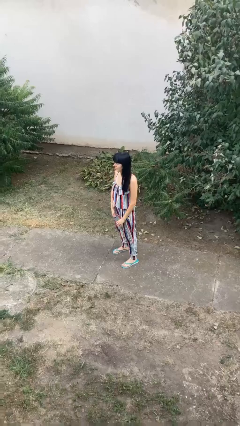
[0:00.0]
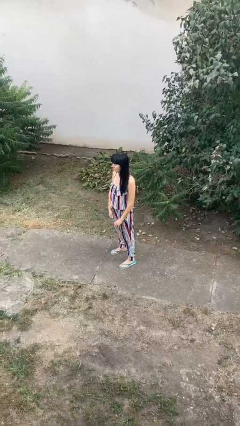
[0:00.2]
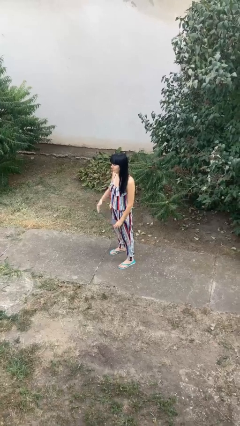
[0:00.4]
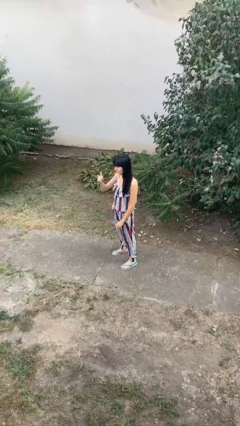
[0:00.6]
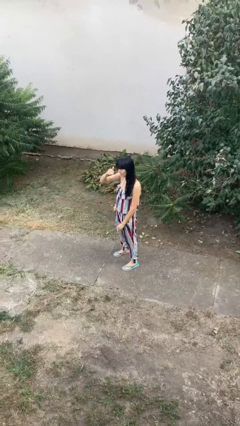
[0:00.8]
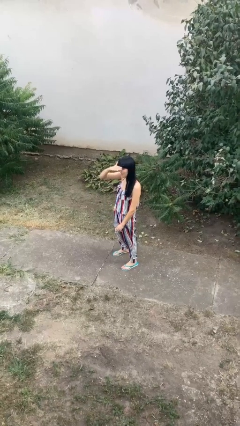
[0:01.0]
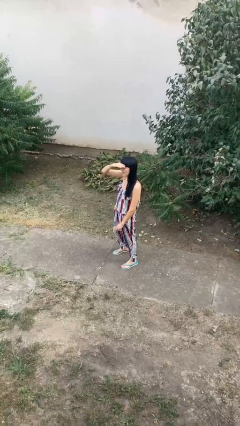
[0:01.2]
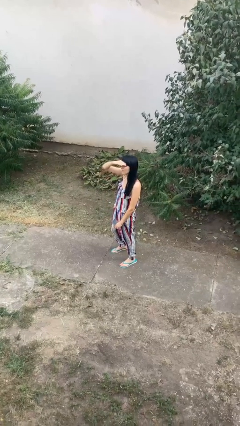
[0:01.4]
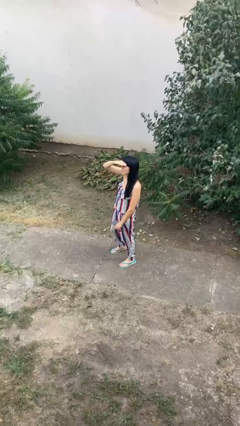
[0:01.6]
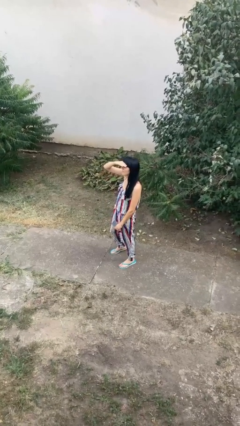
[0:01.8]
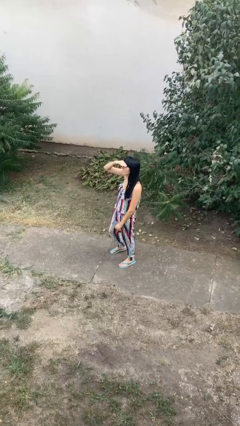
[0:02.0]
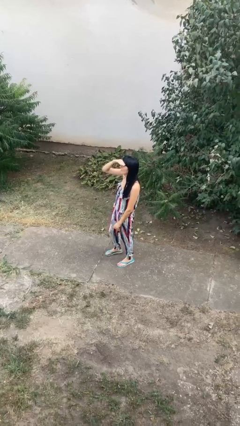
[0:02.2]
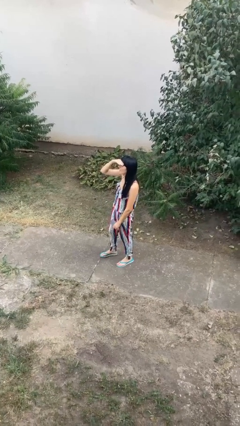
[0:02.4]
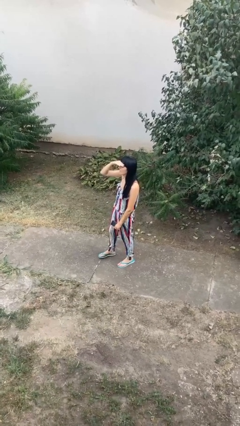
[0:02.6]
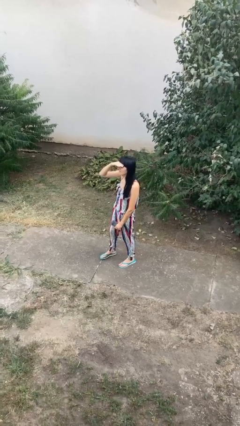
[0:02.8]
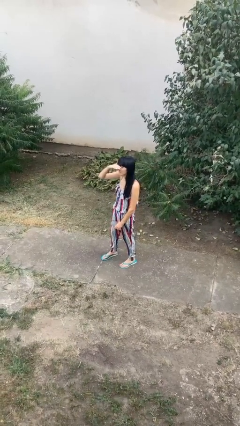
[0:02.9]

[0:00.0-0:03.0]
person shades eyes

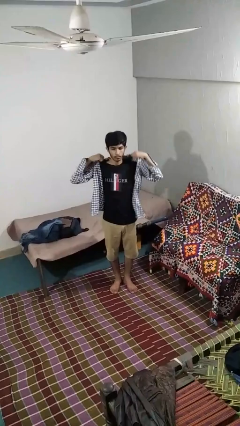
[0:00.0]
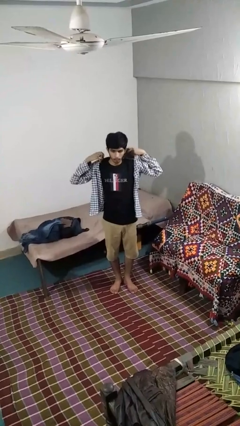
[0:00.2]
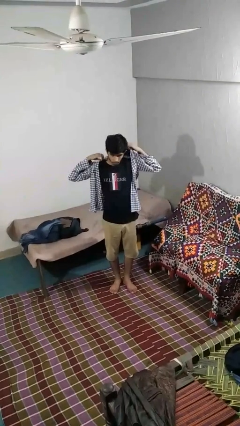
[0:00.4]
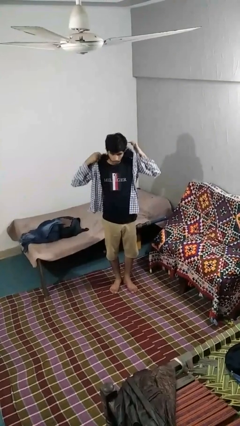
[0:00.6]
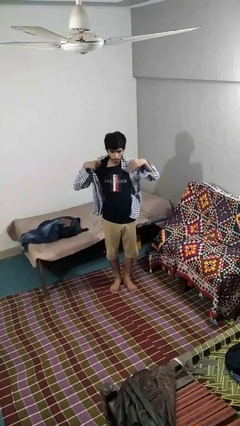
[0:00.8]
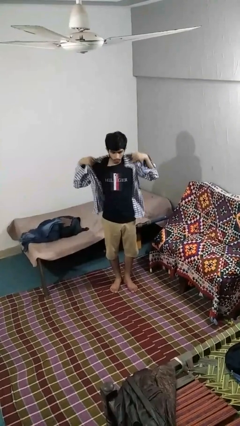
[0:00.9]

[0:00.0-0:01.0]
person takes off shirt

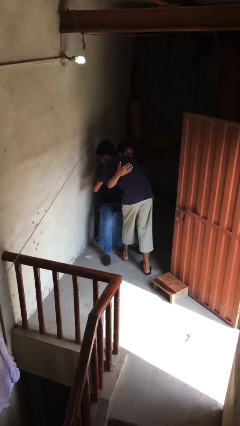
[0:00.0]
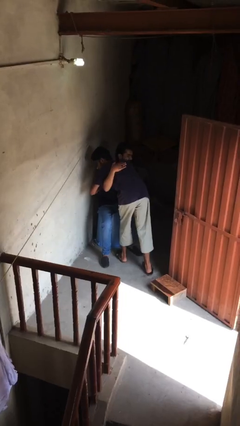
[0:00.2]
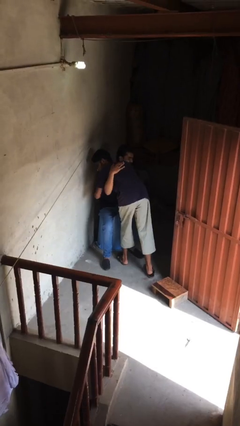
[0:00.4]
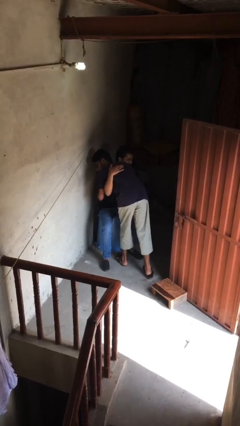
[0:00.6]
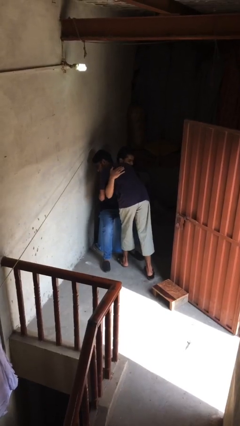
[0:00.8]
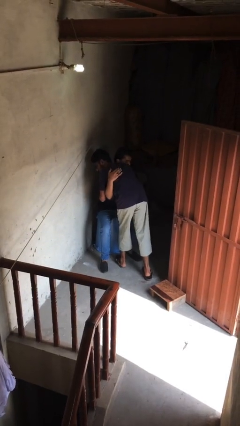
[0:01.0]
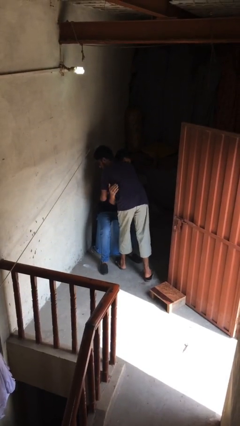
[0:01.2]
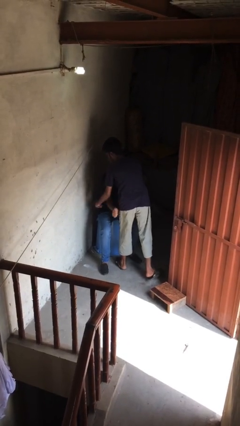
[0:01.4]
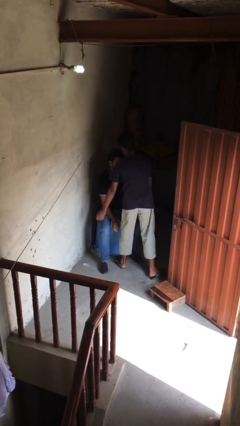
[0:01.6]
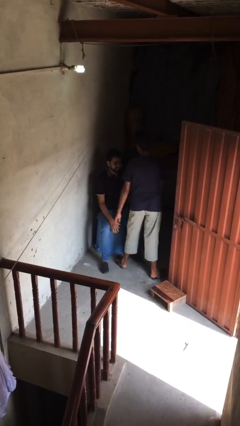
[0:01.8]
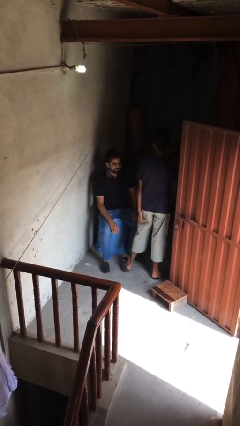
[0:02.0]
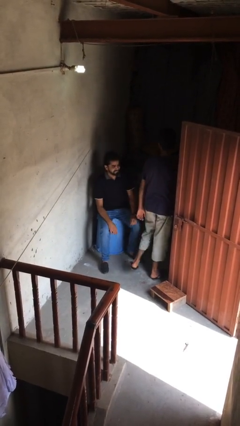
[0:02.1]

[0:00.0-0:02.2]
person embraces person

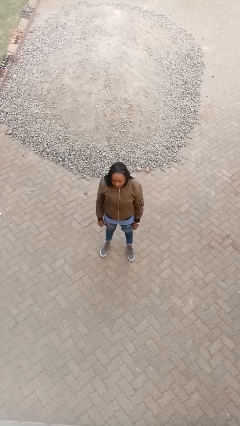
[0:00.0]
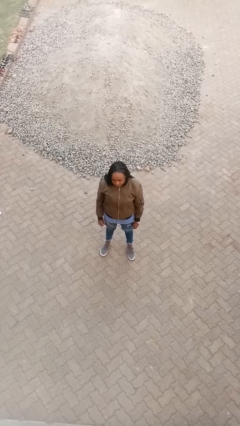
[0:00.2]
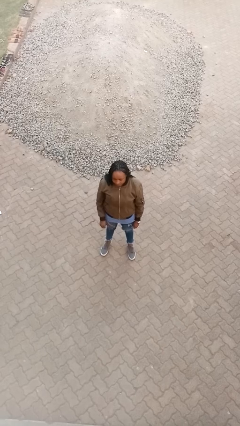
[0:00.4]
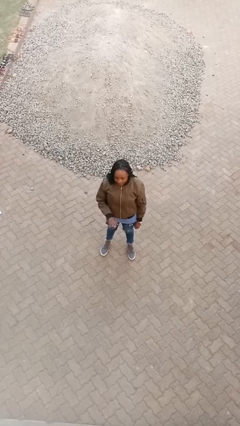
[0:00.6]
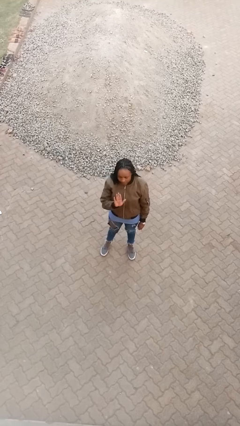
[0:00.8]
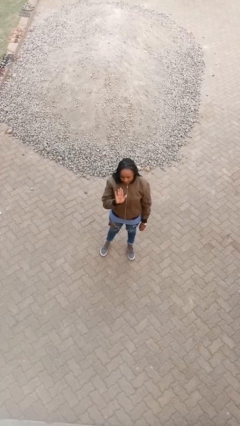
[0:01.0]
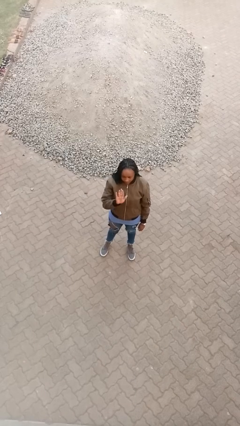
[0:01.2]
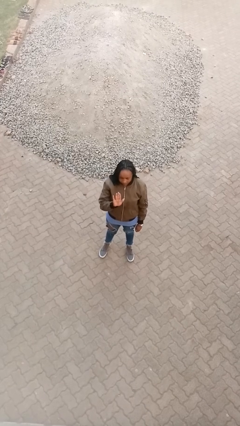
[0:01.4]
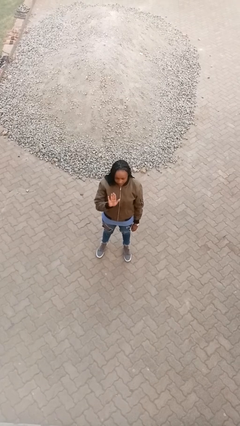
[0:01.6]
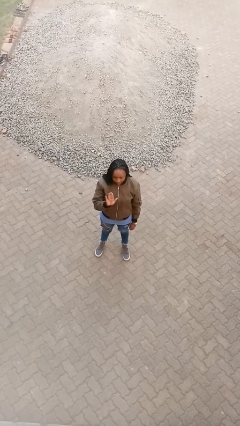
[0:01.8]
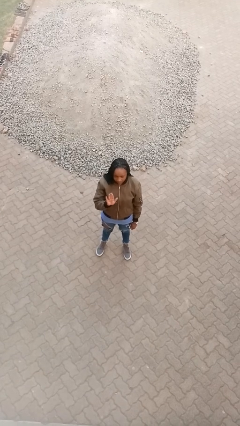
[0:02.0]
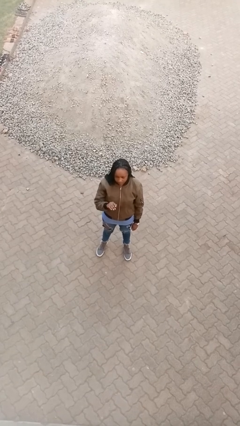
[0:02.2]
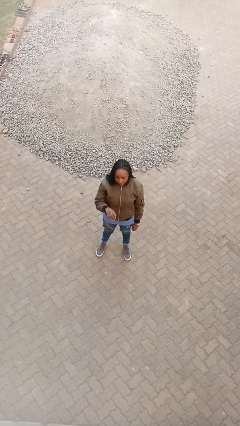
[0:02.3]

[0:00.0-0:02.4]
person gestures stop

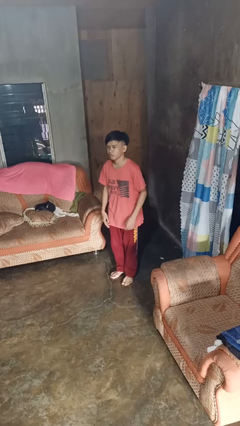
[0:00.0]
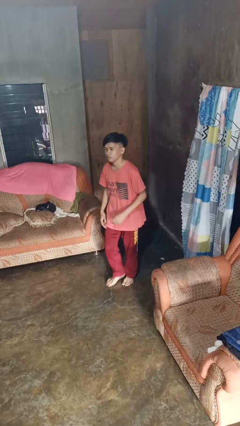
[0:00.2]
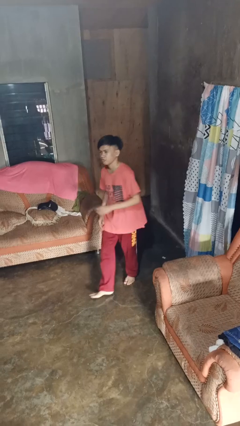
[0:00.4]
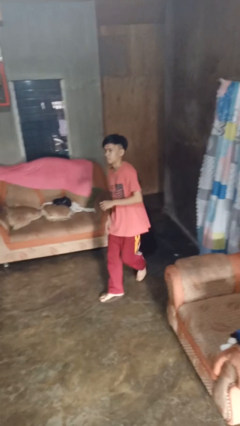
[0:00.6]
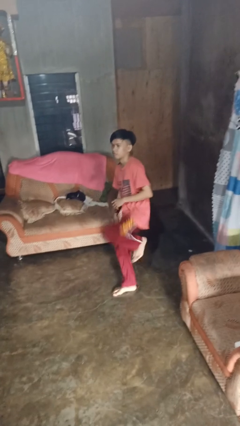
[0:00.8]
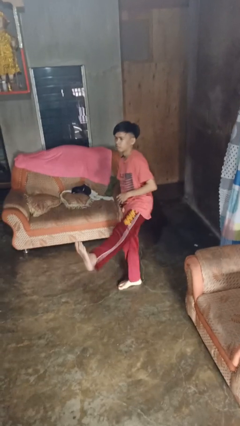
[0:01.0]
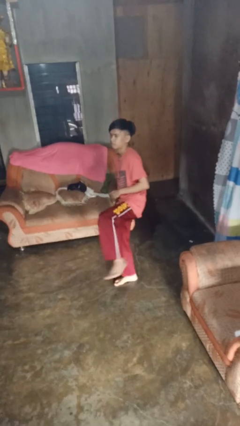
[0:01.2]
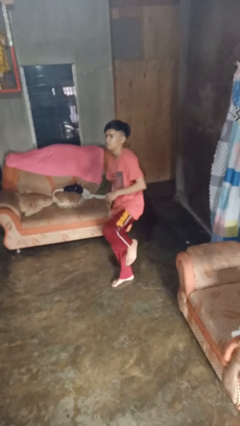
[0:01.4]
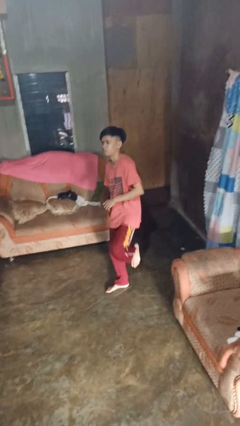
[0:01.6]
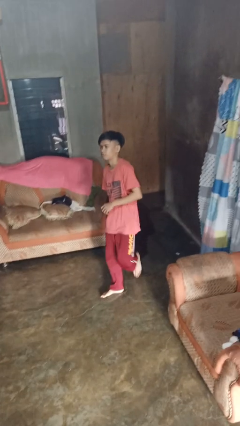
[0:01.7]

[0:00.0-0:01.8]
person karate kicks

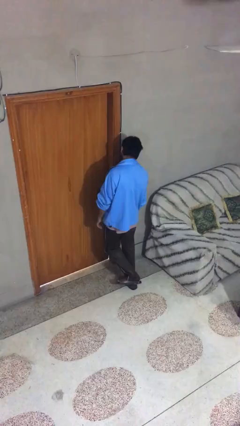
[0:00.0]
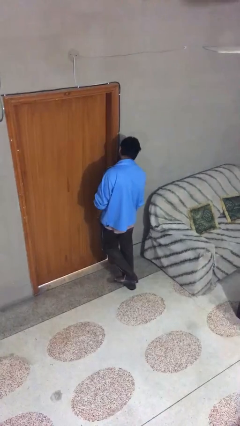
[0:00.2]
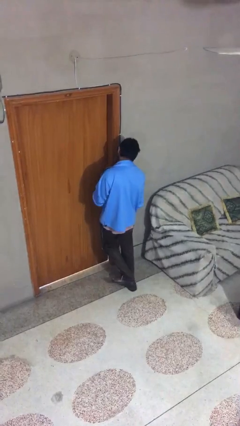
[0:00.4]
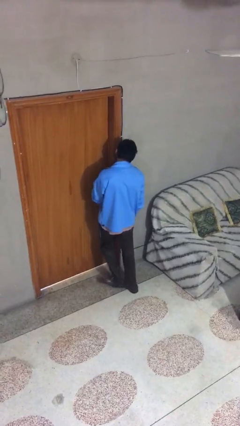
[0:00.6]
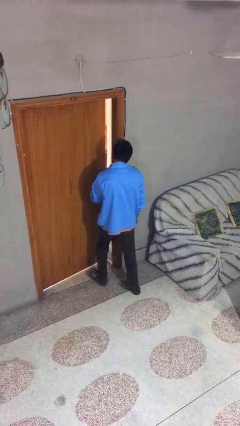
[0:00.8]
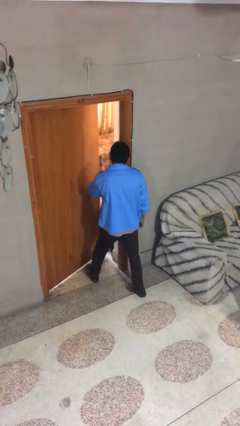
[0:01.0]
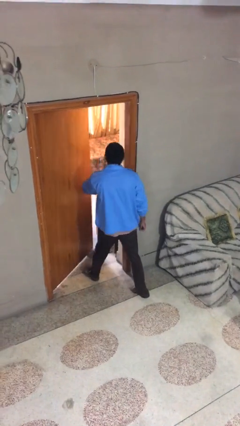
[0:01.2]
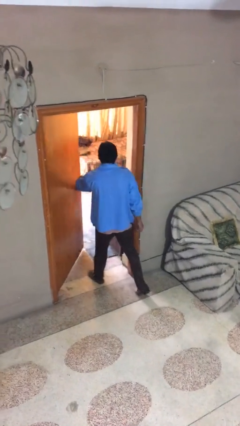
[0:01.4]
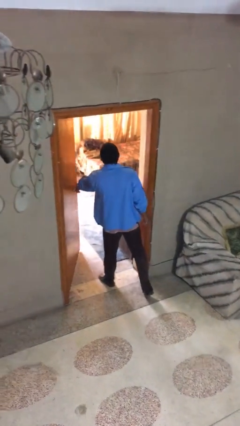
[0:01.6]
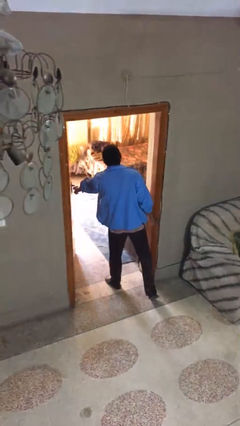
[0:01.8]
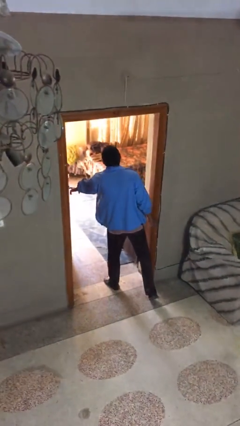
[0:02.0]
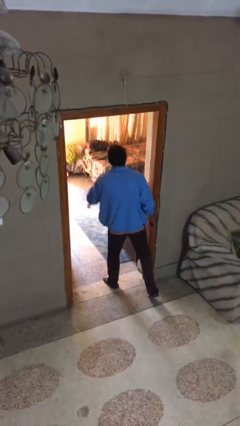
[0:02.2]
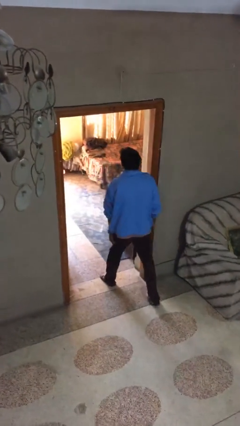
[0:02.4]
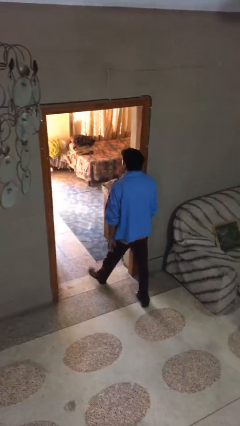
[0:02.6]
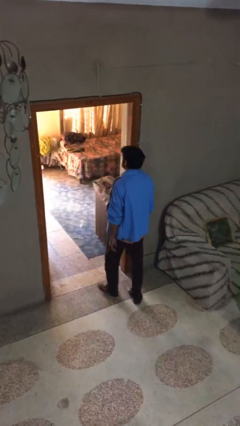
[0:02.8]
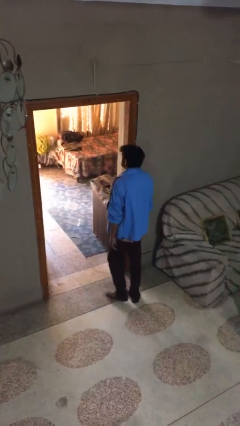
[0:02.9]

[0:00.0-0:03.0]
person opens facility door

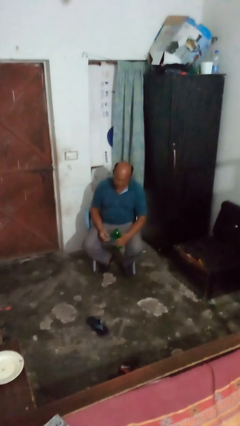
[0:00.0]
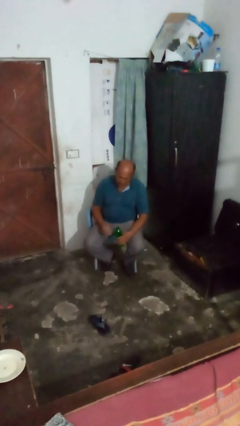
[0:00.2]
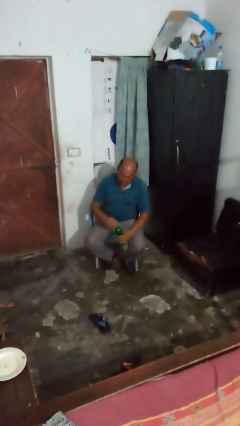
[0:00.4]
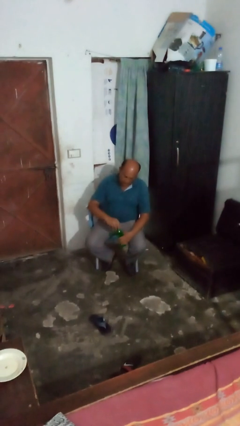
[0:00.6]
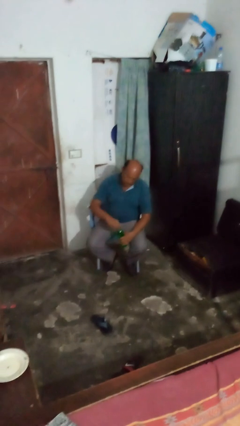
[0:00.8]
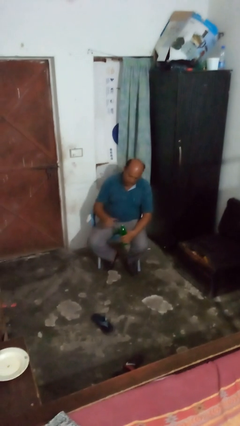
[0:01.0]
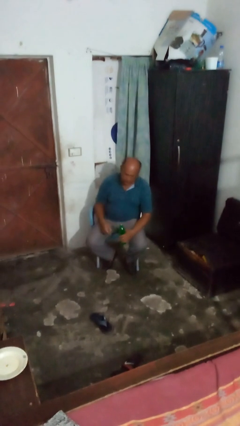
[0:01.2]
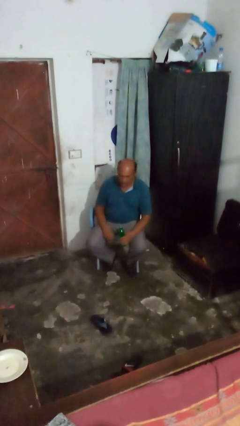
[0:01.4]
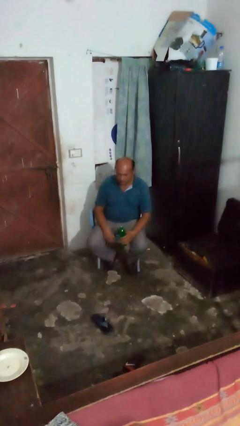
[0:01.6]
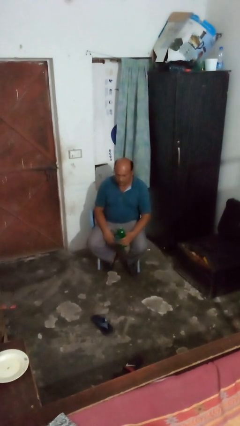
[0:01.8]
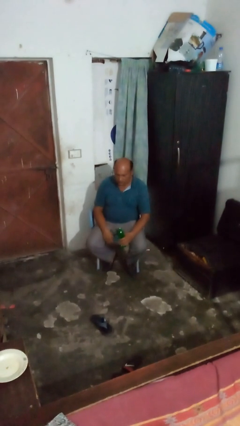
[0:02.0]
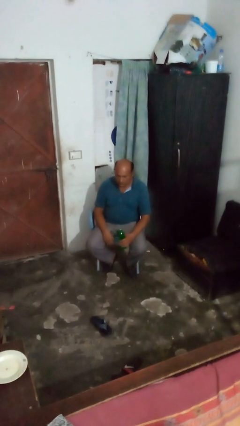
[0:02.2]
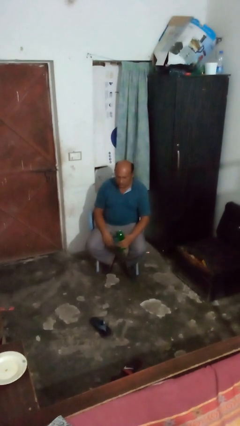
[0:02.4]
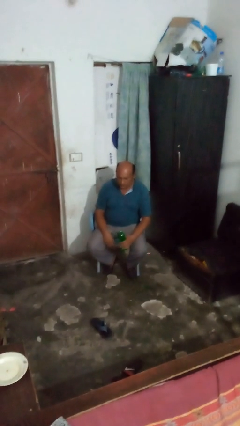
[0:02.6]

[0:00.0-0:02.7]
person screws lid to bottle

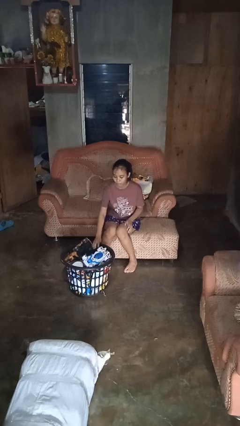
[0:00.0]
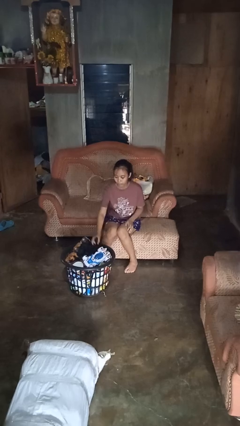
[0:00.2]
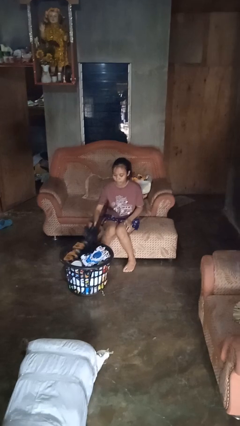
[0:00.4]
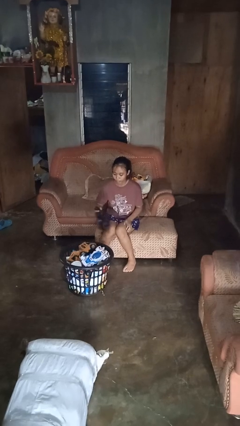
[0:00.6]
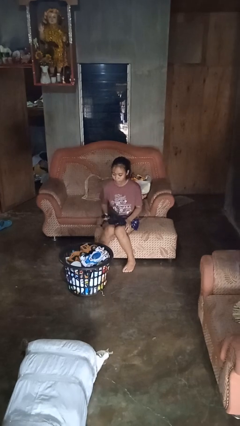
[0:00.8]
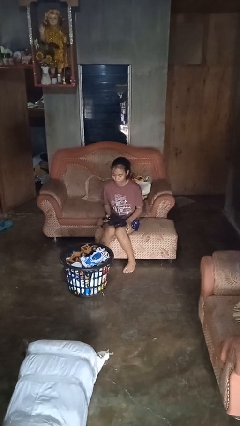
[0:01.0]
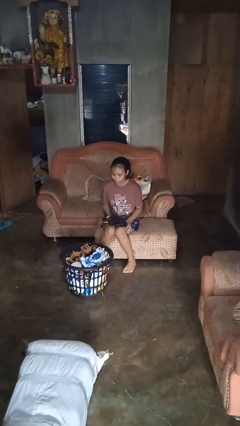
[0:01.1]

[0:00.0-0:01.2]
person takes object from basket
